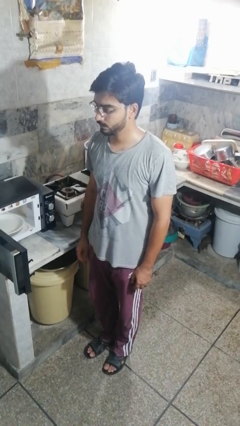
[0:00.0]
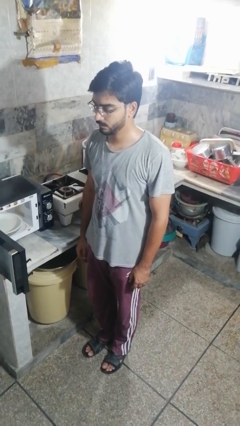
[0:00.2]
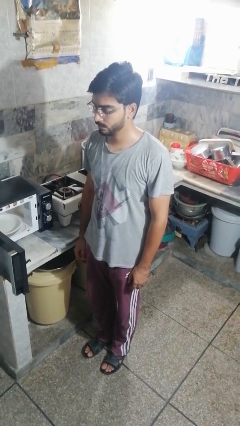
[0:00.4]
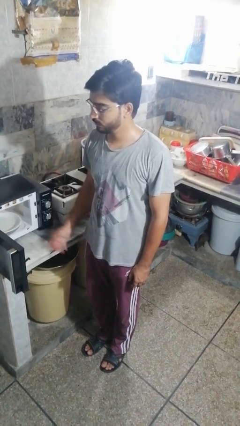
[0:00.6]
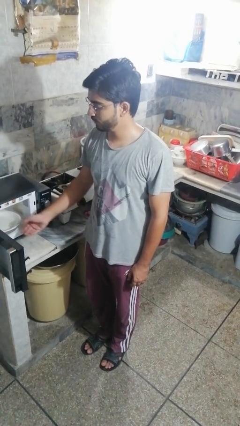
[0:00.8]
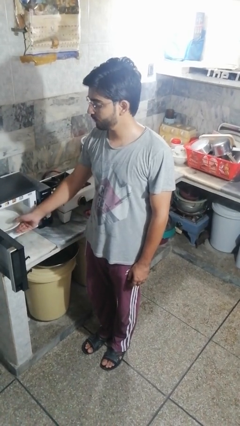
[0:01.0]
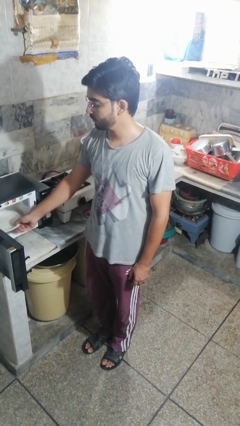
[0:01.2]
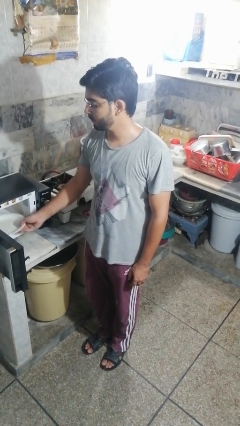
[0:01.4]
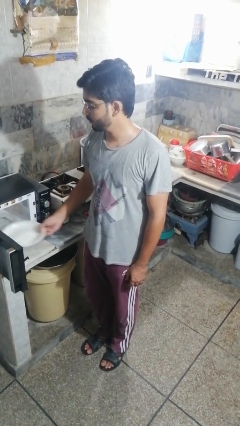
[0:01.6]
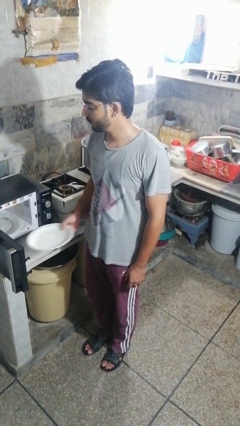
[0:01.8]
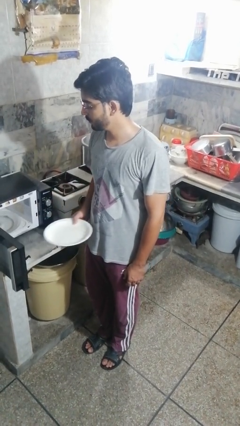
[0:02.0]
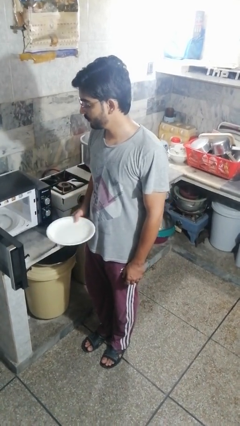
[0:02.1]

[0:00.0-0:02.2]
person takes object from oven

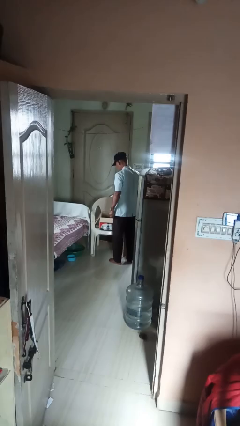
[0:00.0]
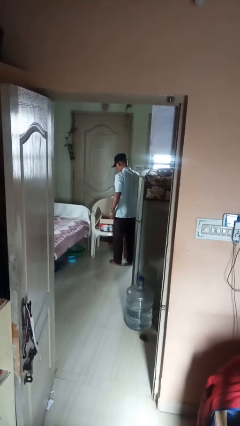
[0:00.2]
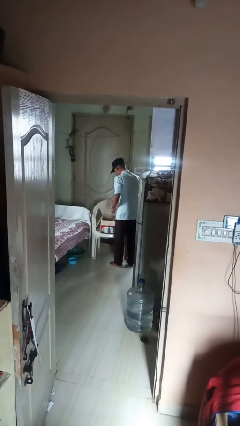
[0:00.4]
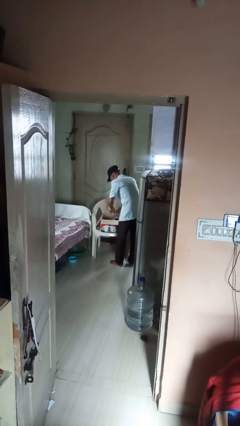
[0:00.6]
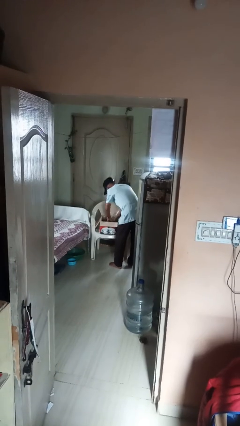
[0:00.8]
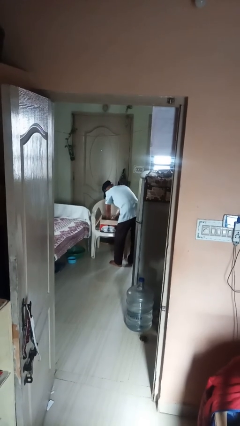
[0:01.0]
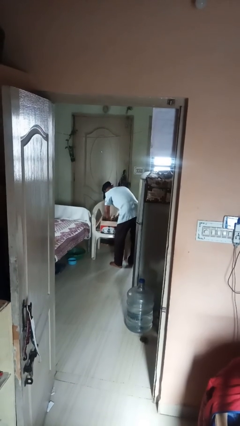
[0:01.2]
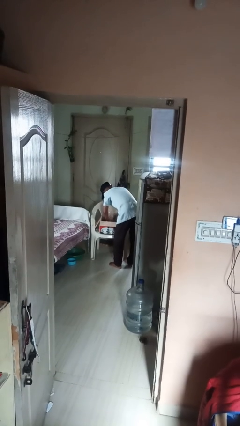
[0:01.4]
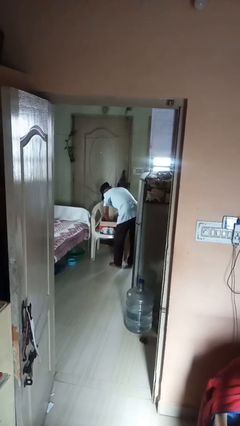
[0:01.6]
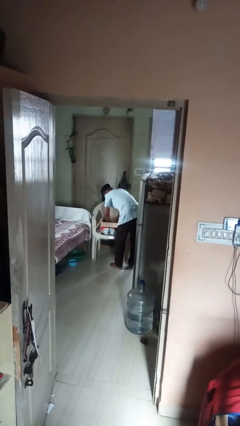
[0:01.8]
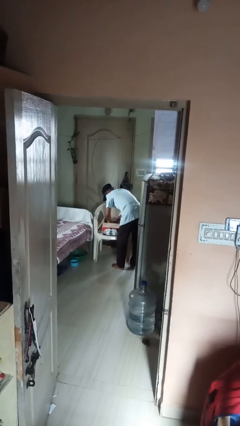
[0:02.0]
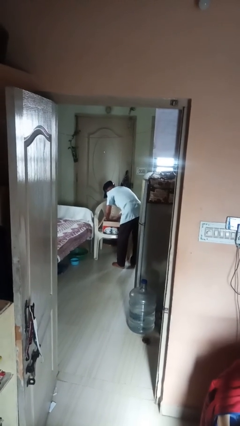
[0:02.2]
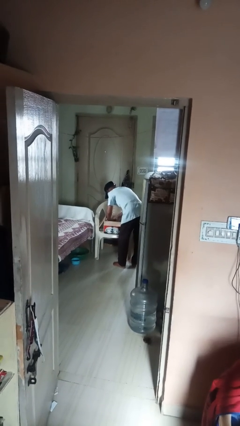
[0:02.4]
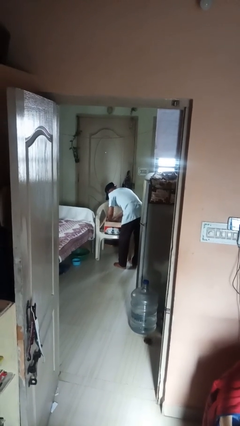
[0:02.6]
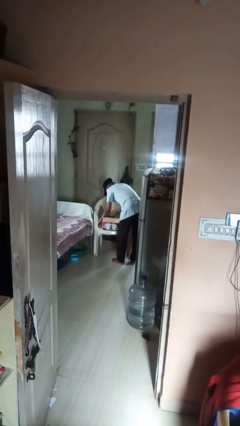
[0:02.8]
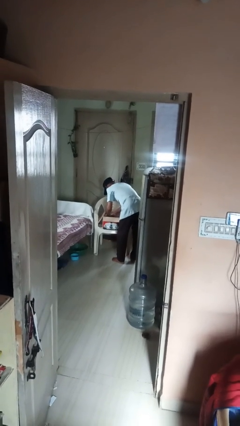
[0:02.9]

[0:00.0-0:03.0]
person searches in box

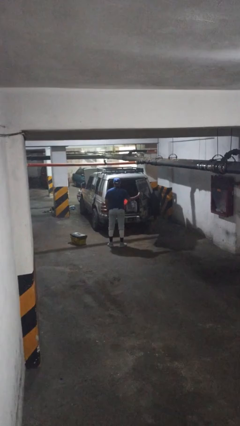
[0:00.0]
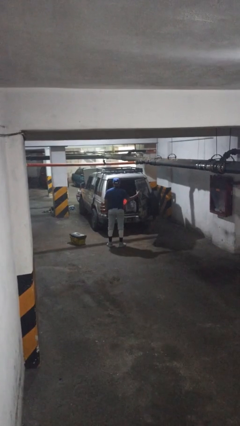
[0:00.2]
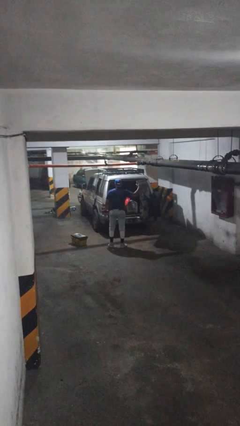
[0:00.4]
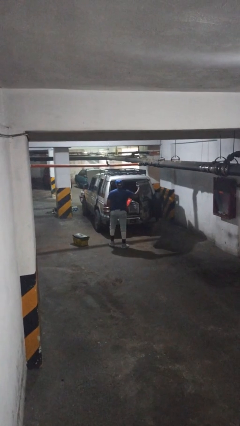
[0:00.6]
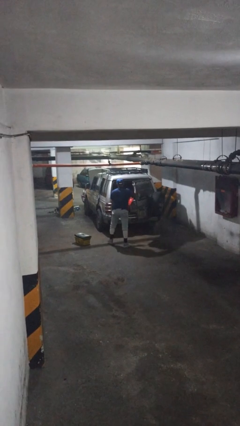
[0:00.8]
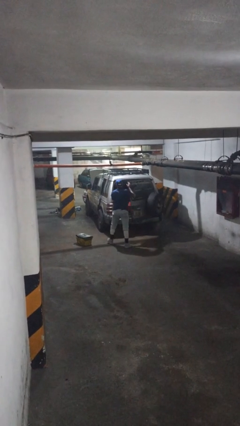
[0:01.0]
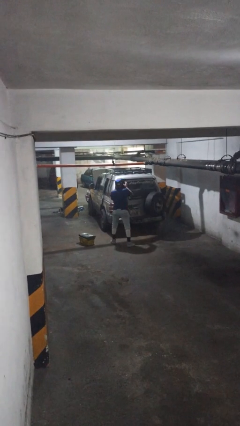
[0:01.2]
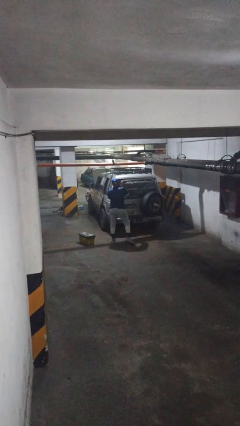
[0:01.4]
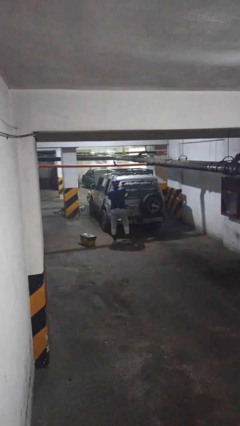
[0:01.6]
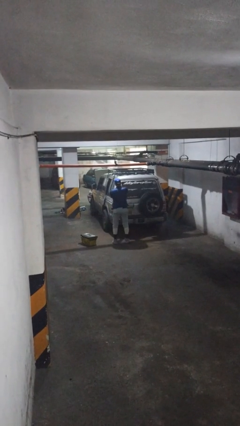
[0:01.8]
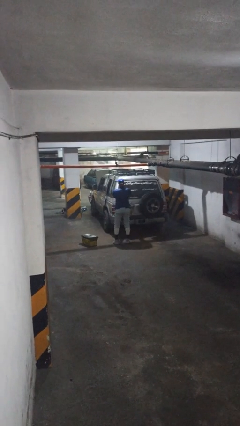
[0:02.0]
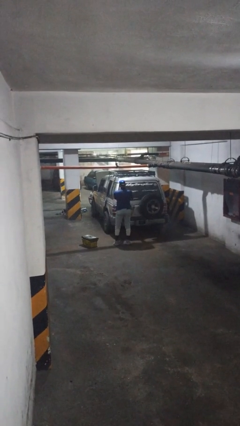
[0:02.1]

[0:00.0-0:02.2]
person closes car trunk

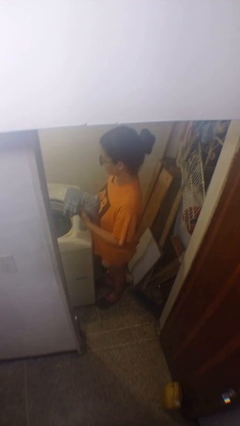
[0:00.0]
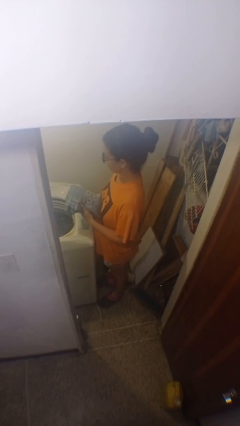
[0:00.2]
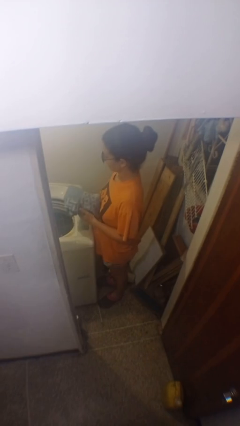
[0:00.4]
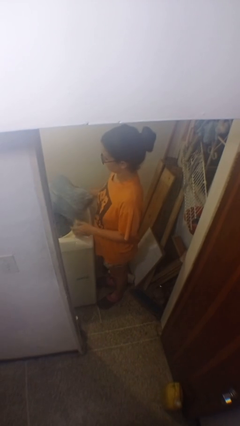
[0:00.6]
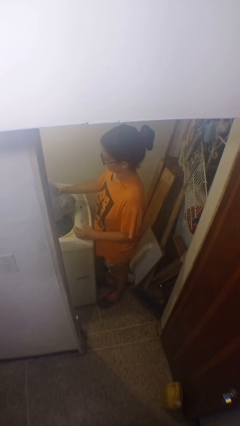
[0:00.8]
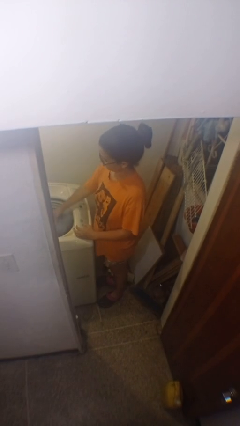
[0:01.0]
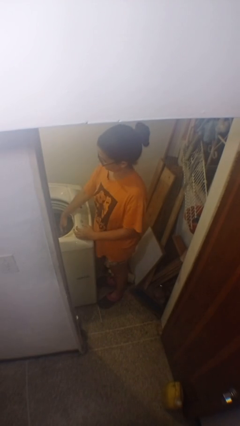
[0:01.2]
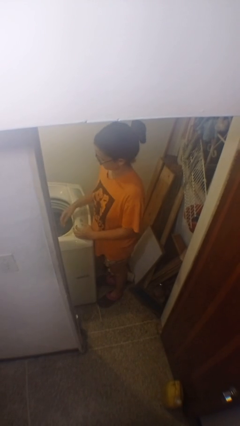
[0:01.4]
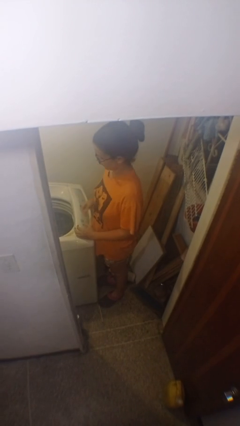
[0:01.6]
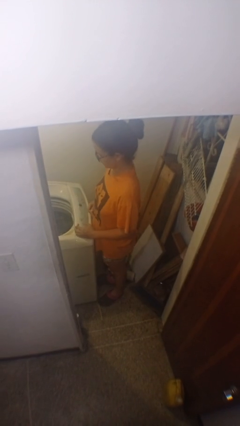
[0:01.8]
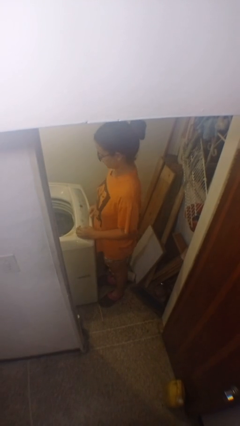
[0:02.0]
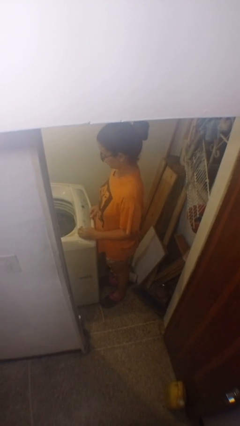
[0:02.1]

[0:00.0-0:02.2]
person loads clotheswasher

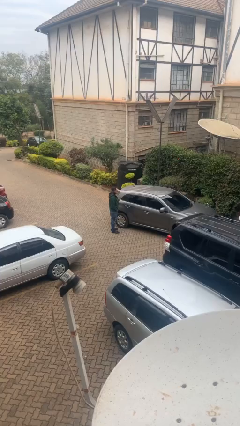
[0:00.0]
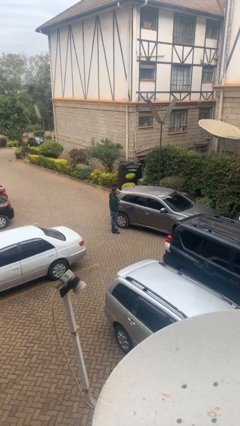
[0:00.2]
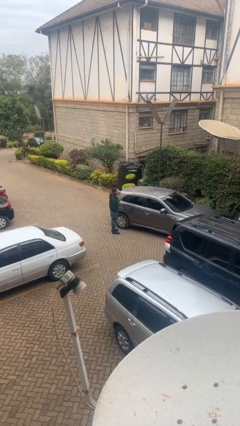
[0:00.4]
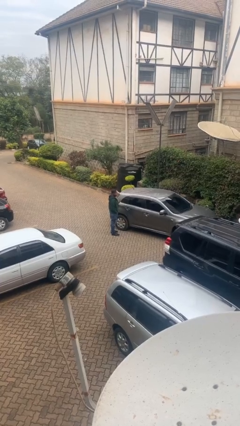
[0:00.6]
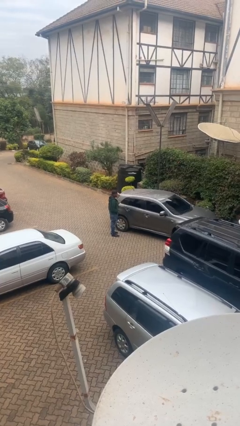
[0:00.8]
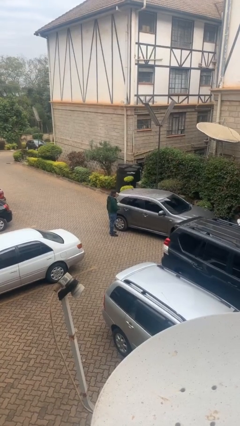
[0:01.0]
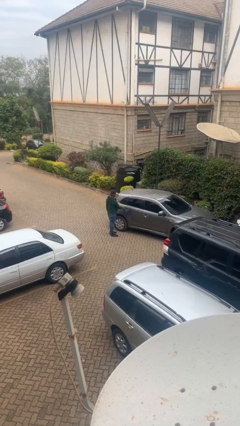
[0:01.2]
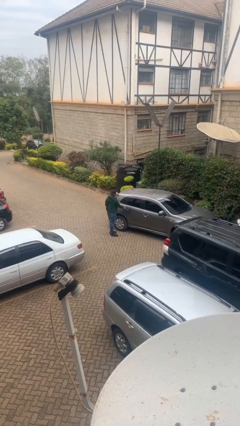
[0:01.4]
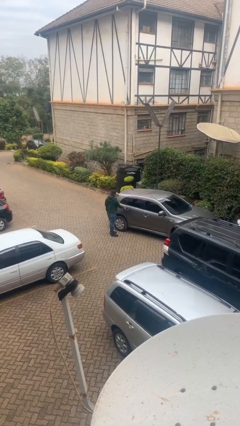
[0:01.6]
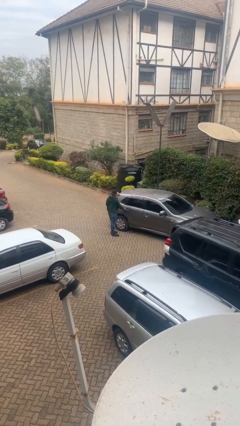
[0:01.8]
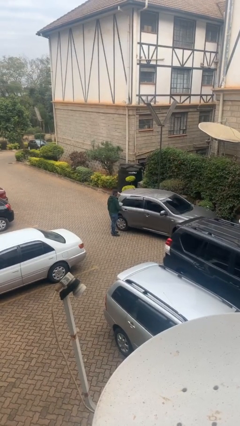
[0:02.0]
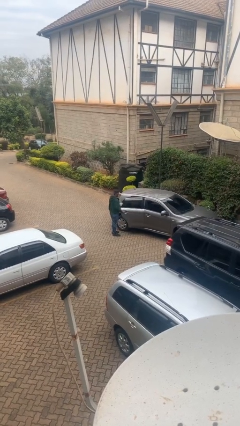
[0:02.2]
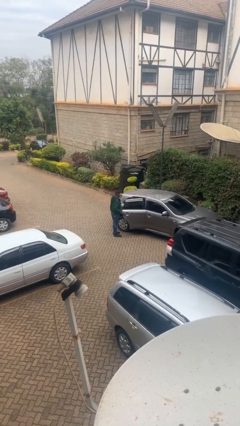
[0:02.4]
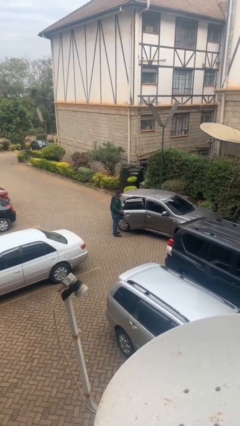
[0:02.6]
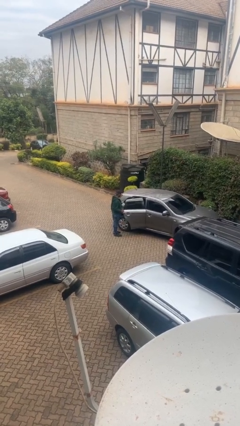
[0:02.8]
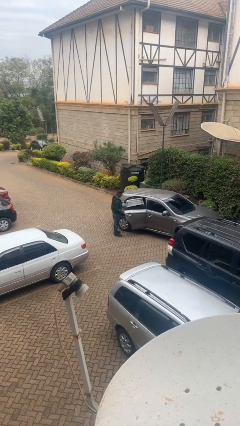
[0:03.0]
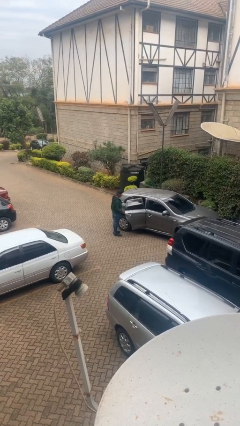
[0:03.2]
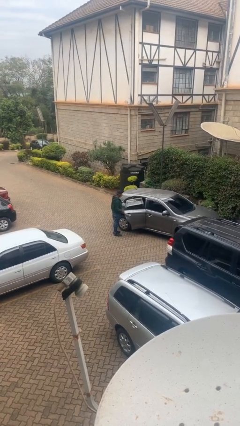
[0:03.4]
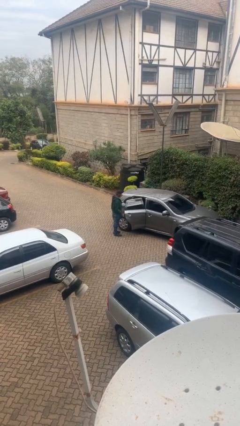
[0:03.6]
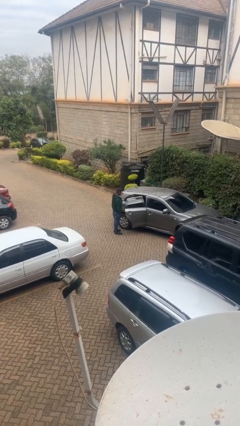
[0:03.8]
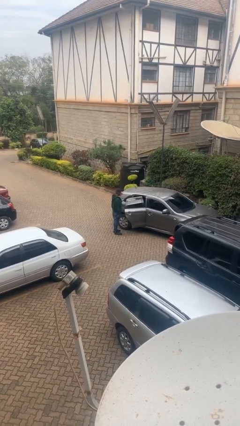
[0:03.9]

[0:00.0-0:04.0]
person opens car door

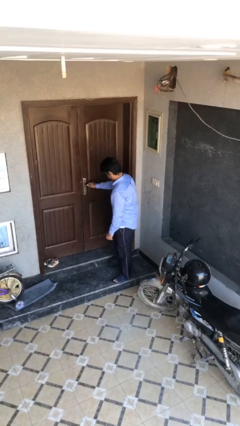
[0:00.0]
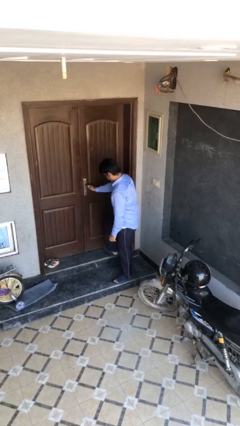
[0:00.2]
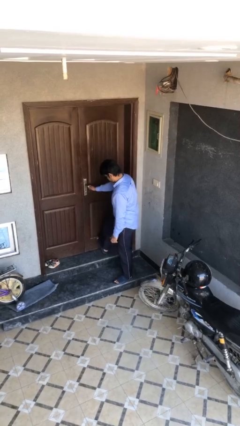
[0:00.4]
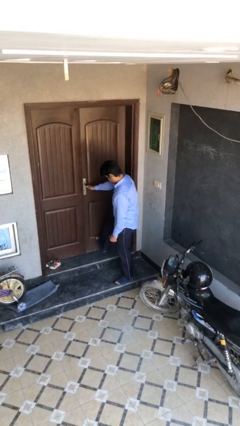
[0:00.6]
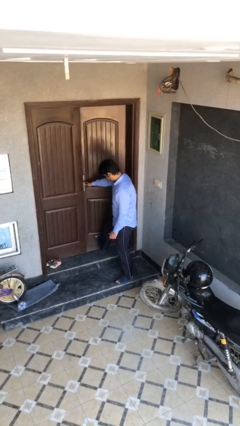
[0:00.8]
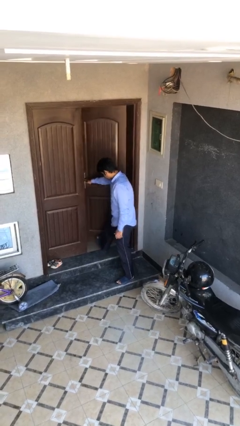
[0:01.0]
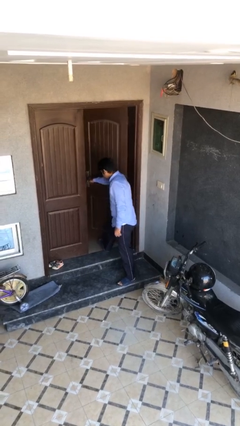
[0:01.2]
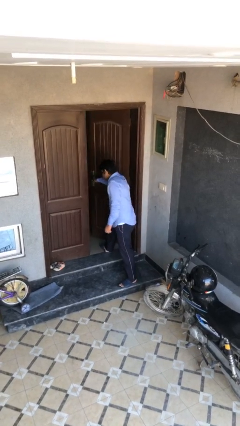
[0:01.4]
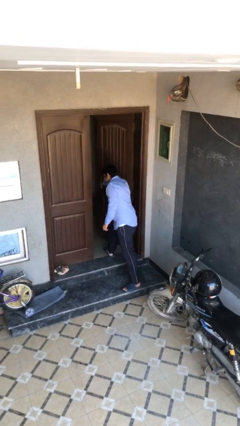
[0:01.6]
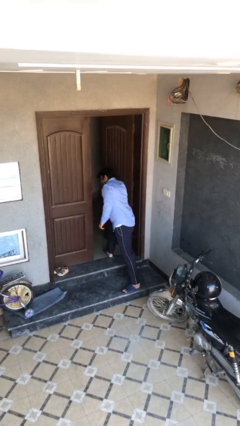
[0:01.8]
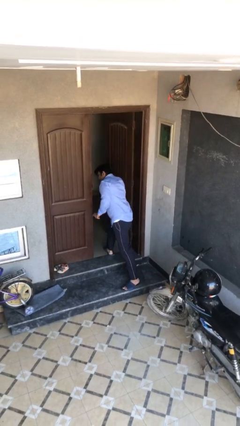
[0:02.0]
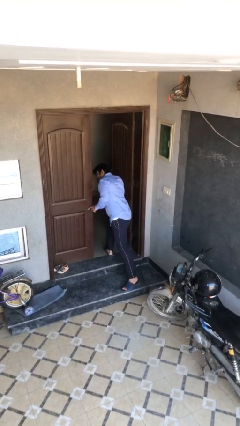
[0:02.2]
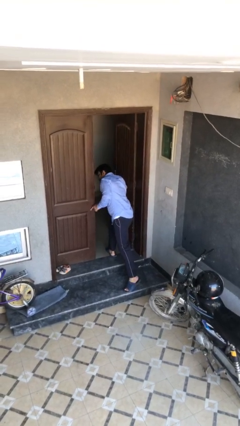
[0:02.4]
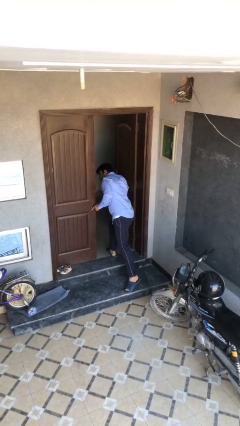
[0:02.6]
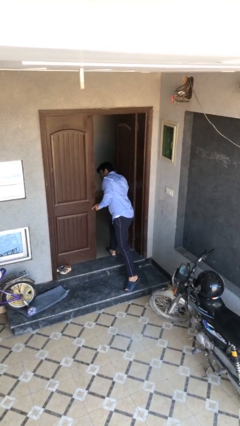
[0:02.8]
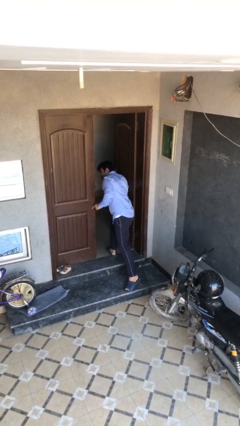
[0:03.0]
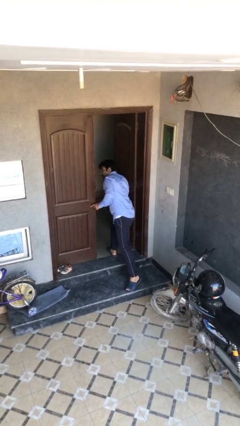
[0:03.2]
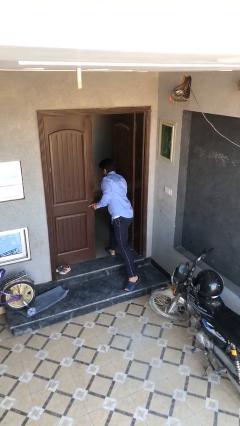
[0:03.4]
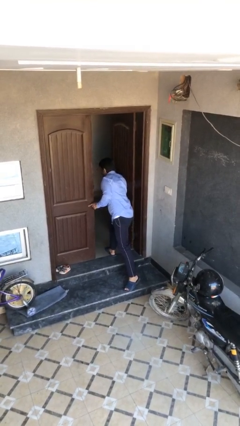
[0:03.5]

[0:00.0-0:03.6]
person opens facility door
